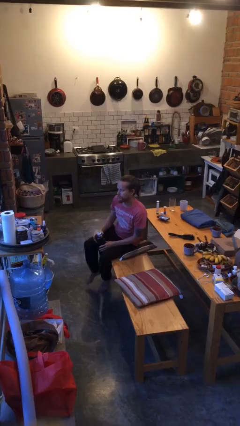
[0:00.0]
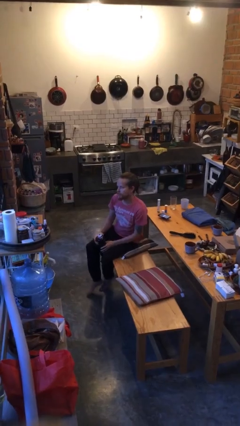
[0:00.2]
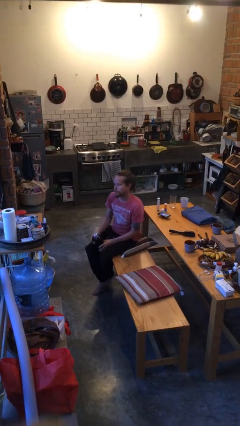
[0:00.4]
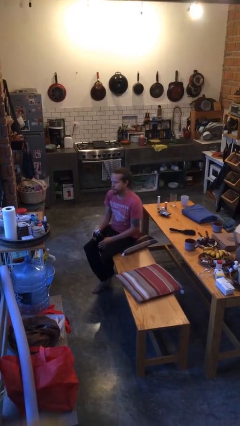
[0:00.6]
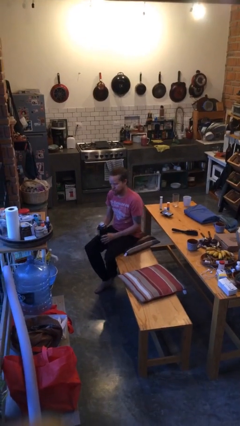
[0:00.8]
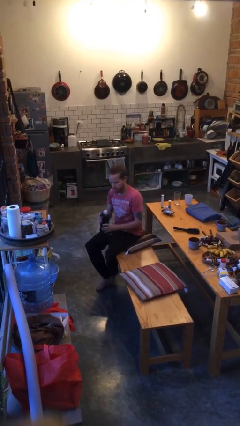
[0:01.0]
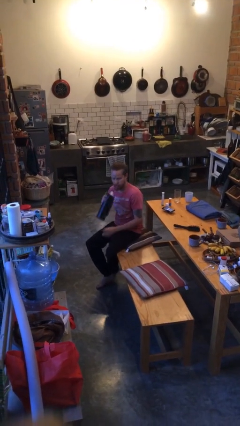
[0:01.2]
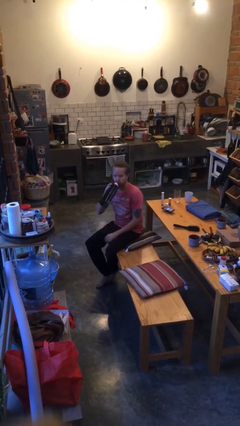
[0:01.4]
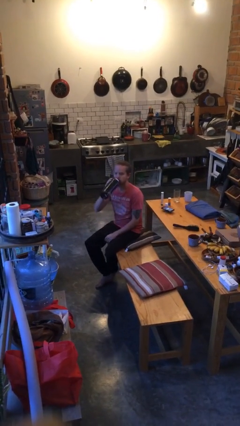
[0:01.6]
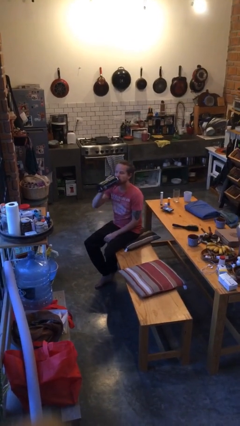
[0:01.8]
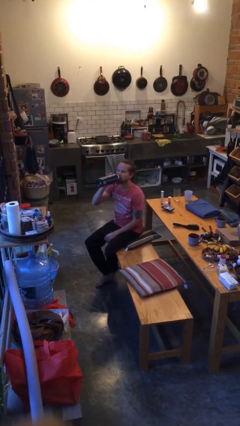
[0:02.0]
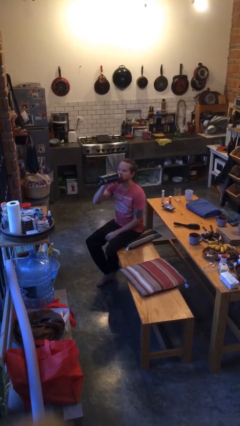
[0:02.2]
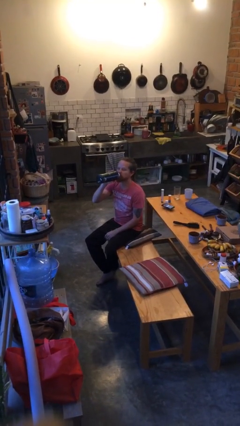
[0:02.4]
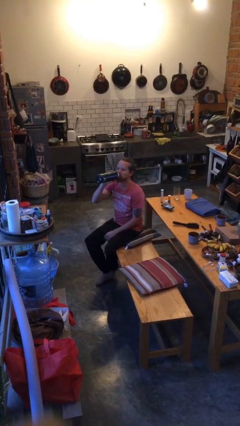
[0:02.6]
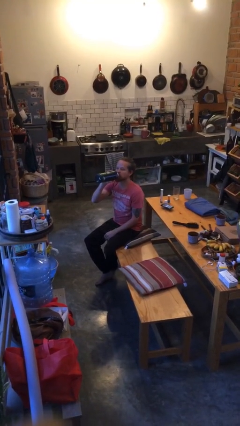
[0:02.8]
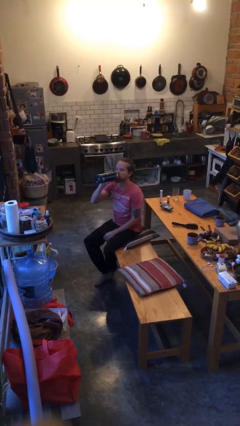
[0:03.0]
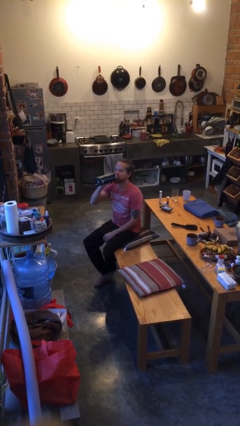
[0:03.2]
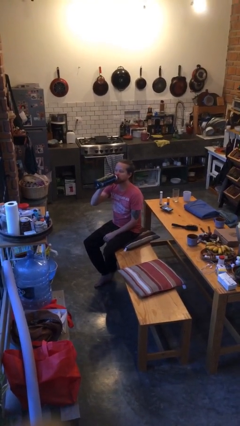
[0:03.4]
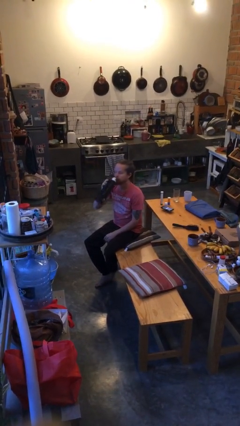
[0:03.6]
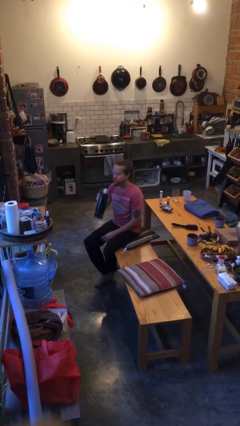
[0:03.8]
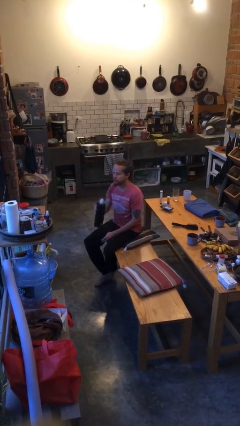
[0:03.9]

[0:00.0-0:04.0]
person drinks from bottle

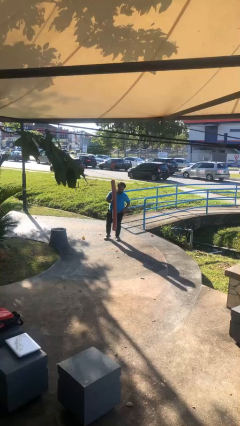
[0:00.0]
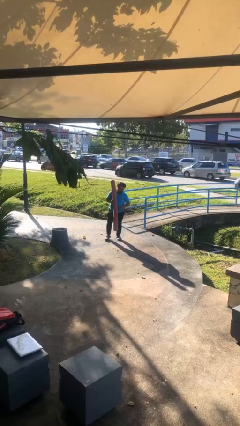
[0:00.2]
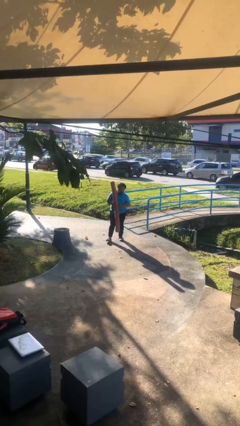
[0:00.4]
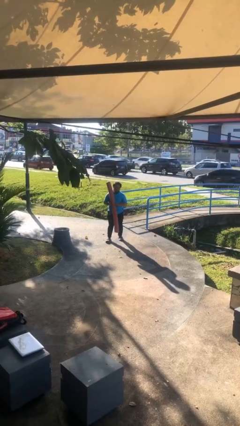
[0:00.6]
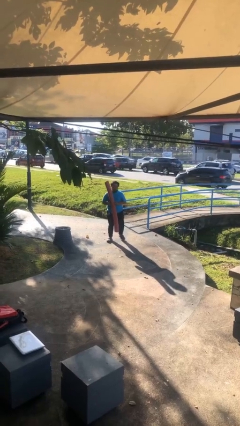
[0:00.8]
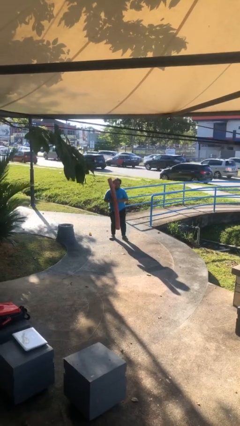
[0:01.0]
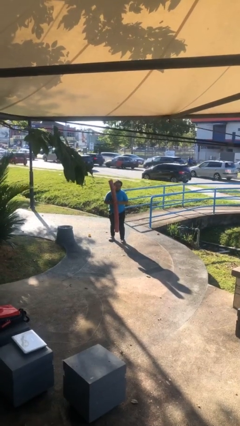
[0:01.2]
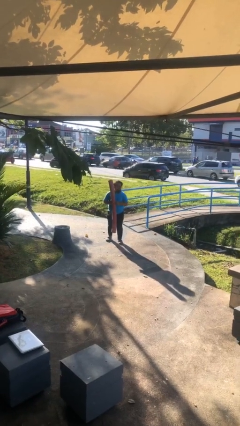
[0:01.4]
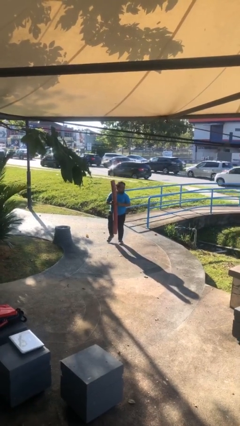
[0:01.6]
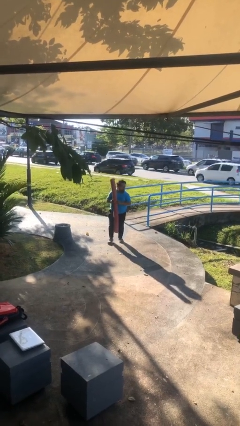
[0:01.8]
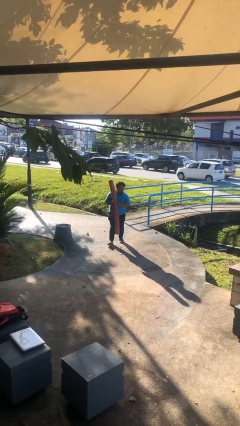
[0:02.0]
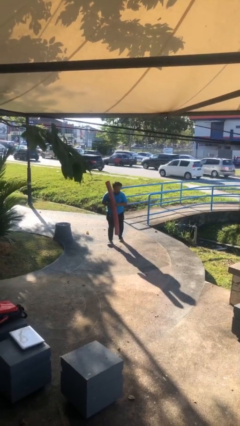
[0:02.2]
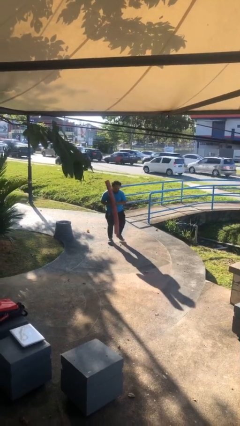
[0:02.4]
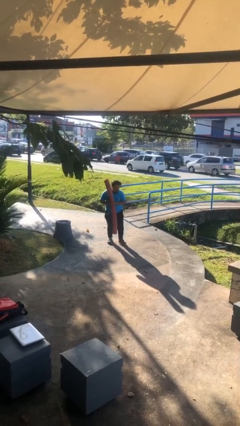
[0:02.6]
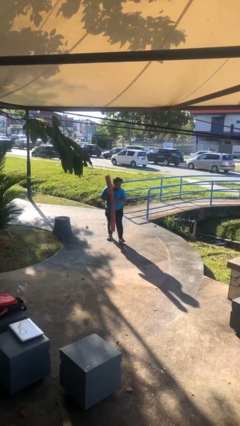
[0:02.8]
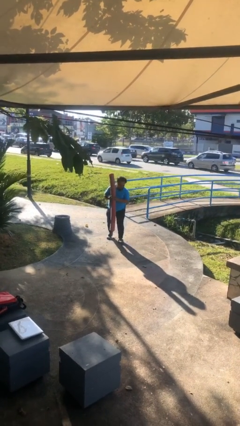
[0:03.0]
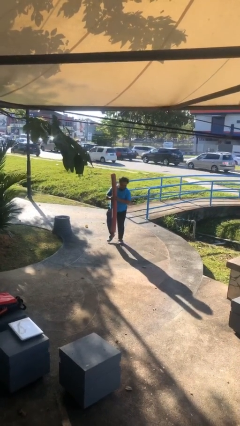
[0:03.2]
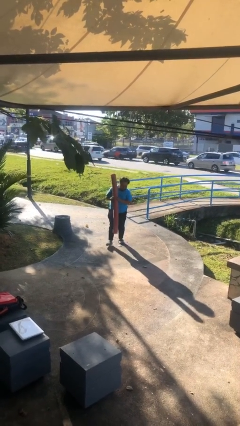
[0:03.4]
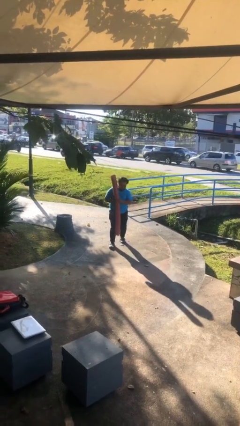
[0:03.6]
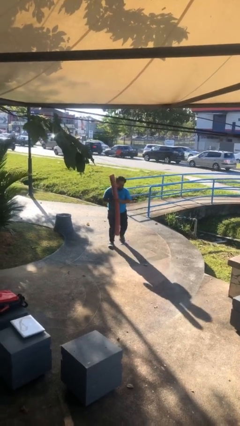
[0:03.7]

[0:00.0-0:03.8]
person carries heavy object

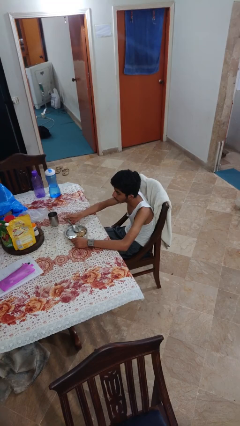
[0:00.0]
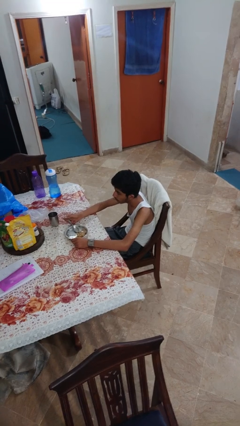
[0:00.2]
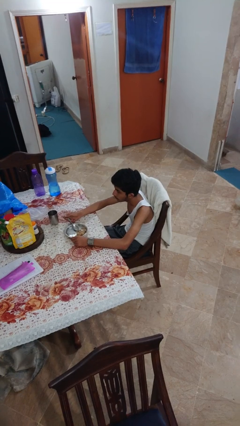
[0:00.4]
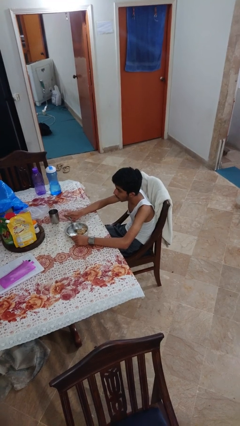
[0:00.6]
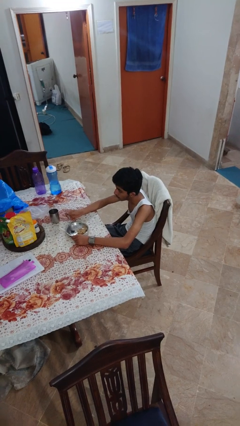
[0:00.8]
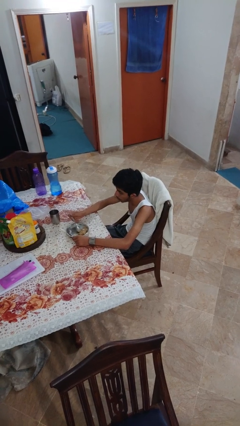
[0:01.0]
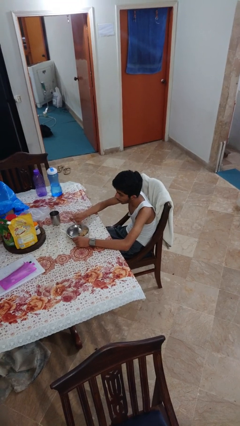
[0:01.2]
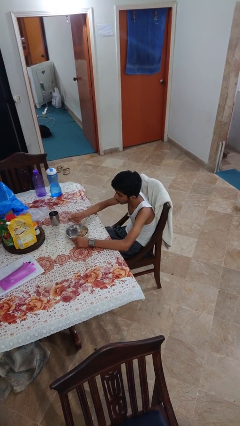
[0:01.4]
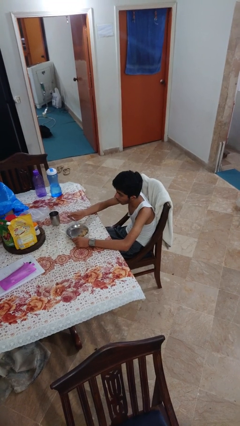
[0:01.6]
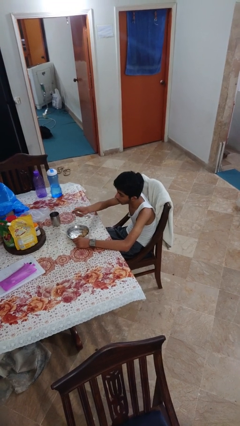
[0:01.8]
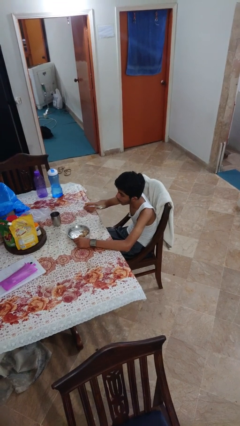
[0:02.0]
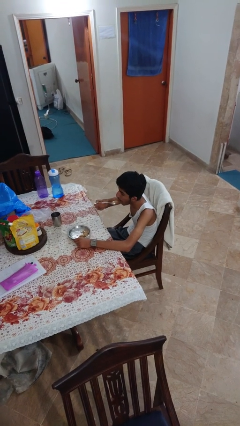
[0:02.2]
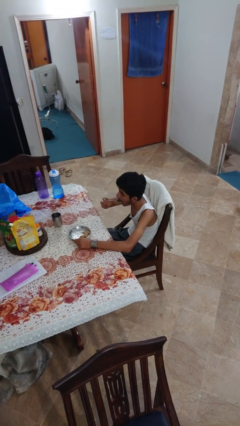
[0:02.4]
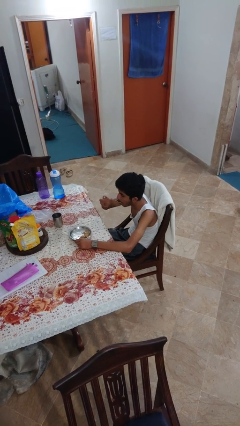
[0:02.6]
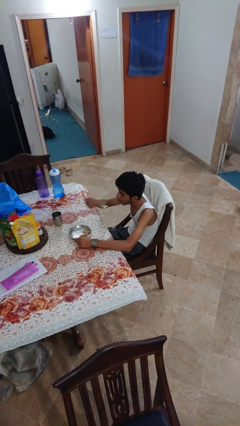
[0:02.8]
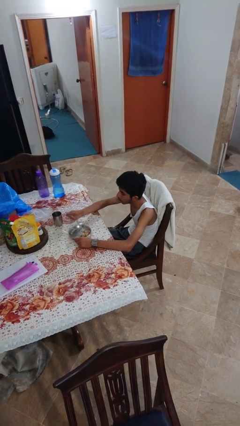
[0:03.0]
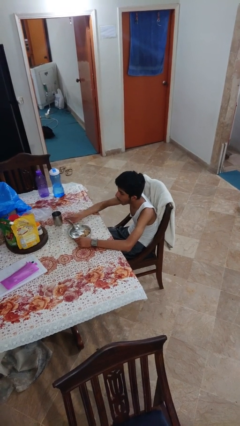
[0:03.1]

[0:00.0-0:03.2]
person eats with utensil

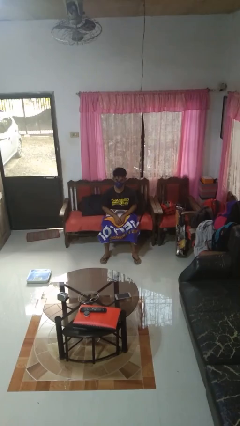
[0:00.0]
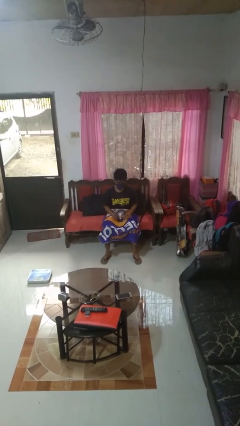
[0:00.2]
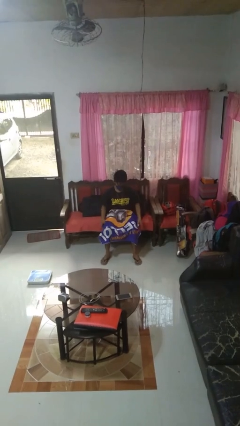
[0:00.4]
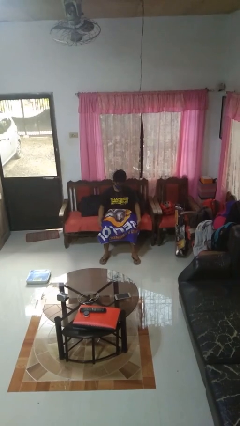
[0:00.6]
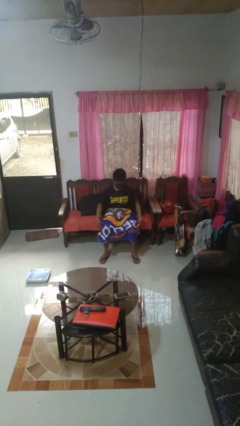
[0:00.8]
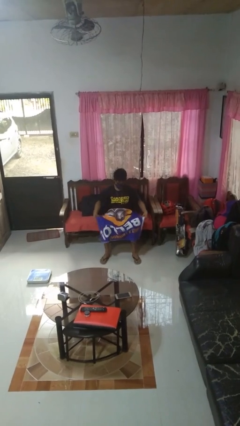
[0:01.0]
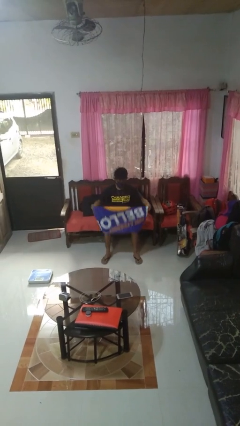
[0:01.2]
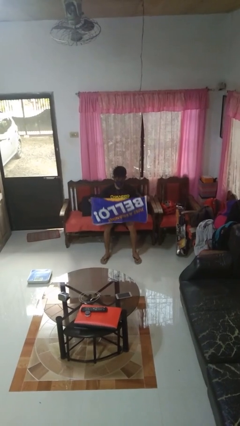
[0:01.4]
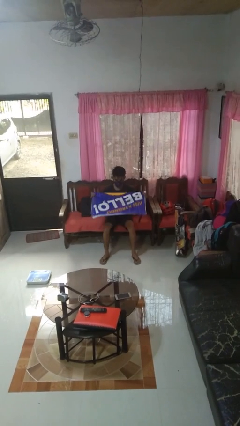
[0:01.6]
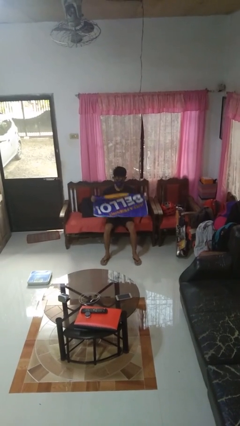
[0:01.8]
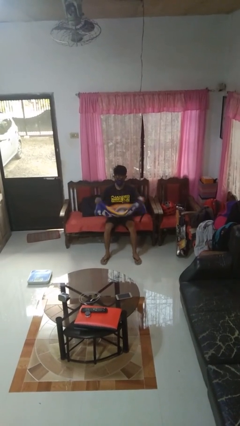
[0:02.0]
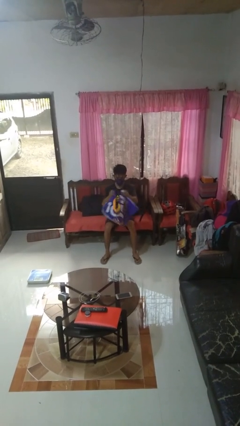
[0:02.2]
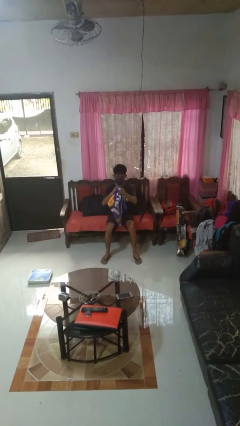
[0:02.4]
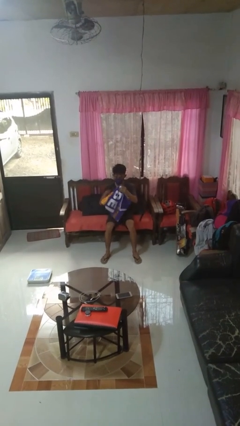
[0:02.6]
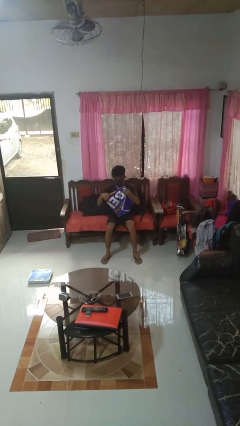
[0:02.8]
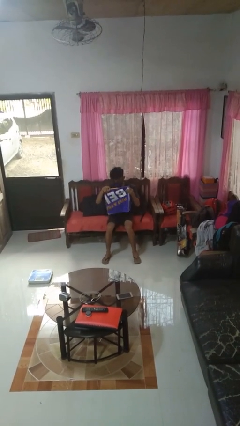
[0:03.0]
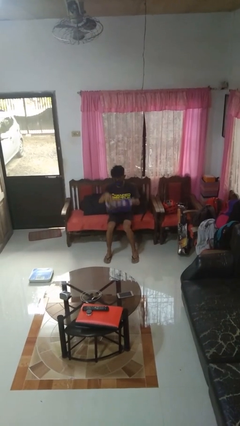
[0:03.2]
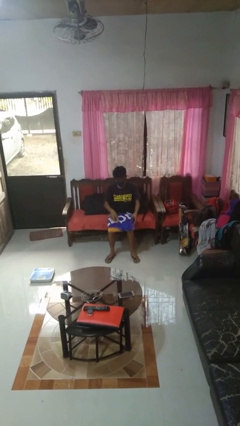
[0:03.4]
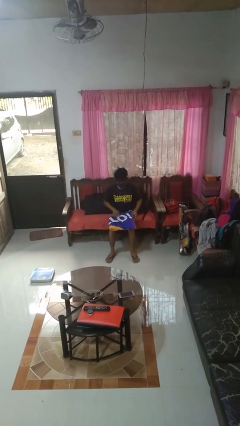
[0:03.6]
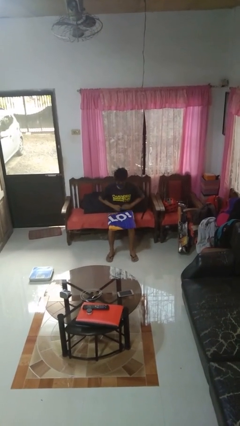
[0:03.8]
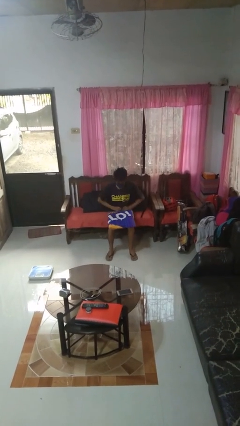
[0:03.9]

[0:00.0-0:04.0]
person folds towel

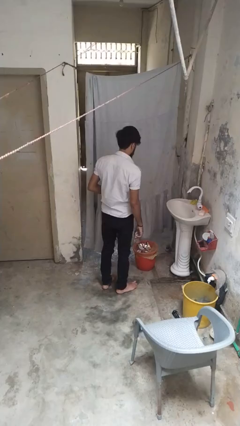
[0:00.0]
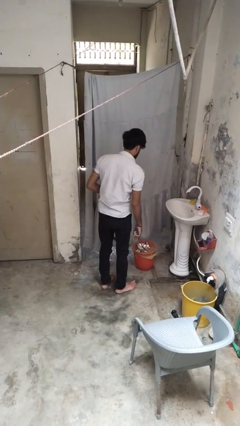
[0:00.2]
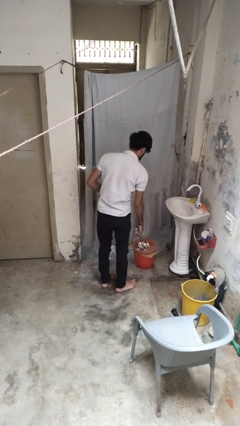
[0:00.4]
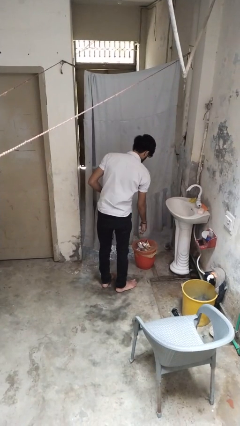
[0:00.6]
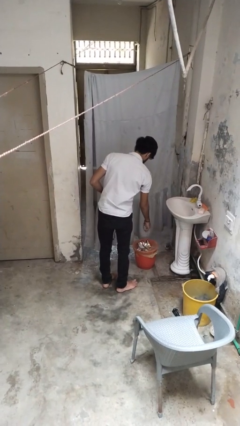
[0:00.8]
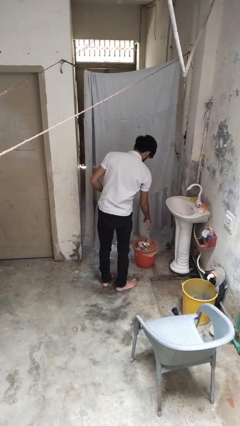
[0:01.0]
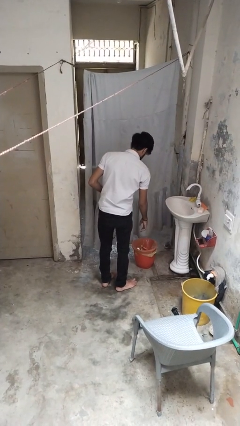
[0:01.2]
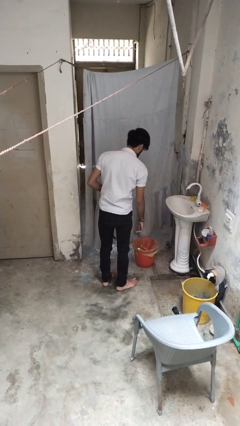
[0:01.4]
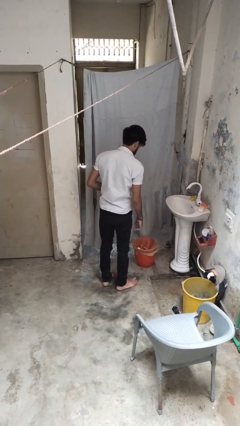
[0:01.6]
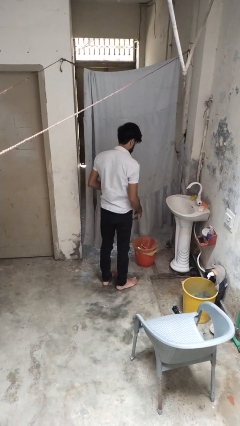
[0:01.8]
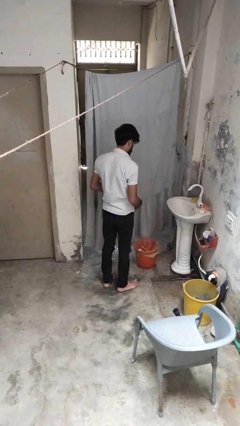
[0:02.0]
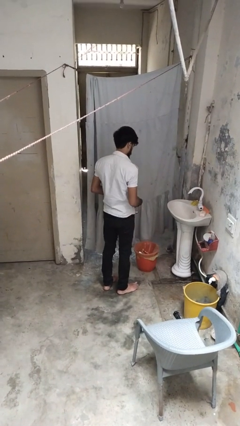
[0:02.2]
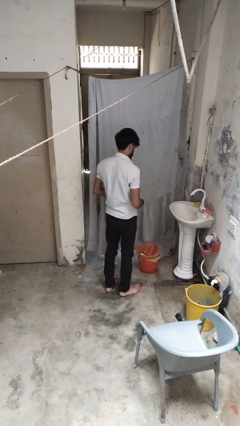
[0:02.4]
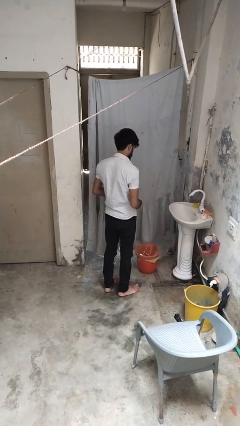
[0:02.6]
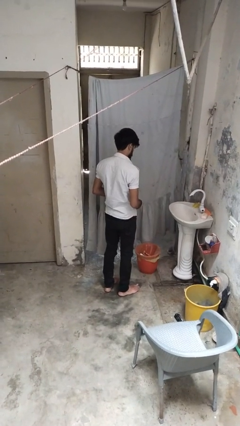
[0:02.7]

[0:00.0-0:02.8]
person discards trash
